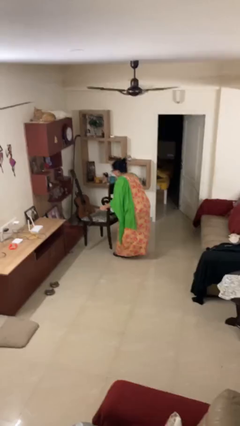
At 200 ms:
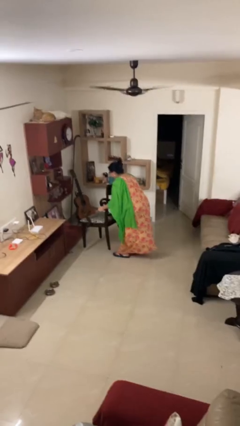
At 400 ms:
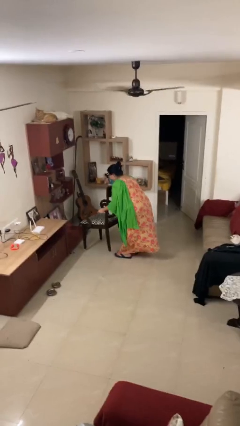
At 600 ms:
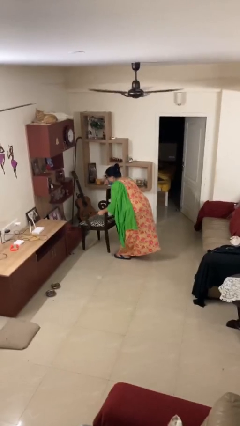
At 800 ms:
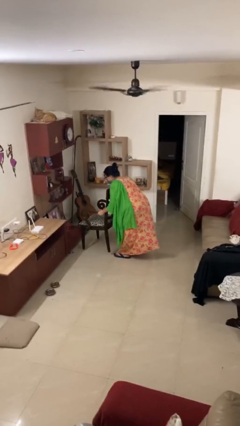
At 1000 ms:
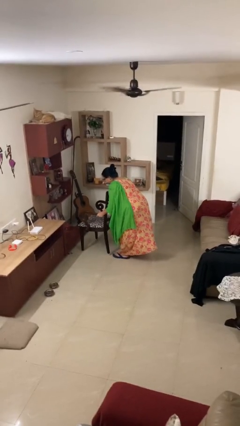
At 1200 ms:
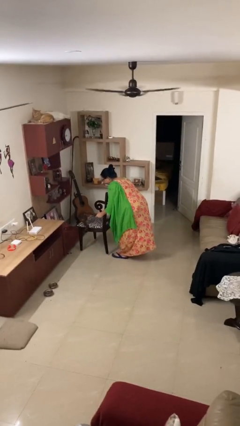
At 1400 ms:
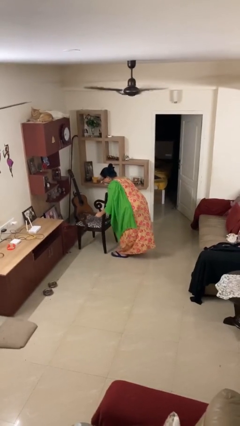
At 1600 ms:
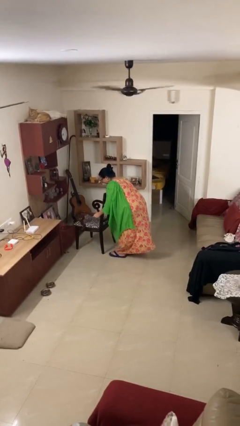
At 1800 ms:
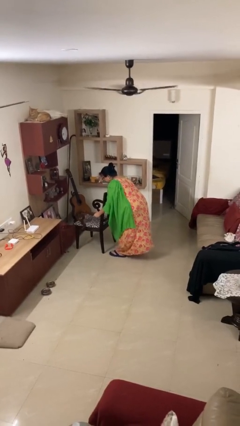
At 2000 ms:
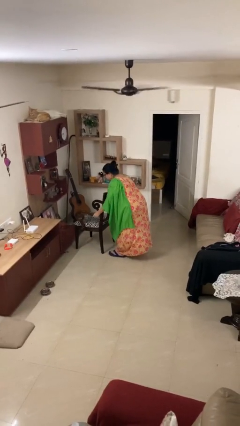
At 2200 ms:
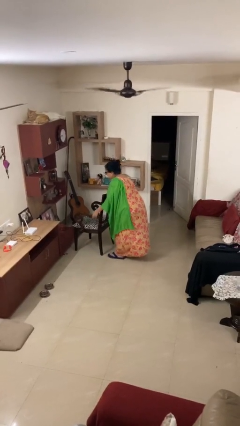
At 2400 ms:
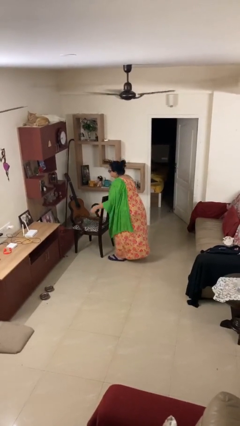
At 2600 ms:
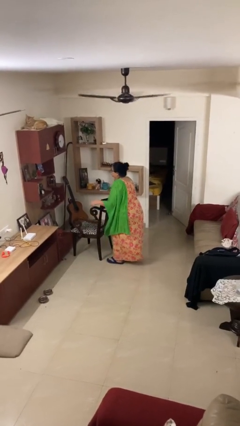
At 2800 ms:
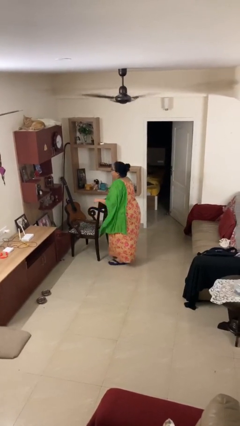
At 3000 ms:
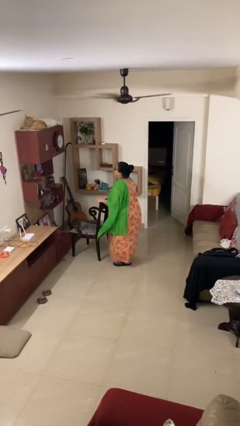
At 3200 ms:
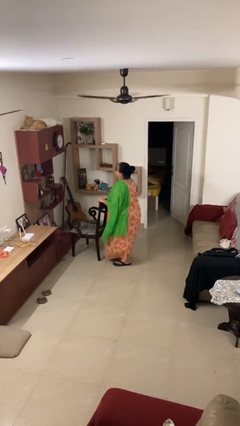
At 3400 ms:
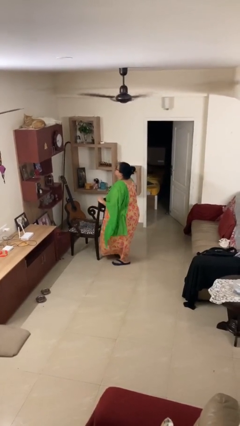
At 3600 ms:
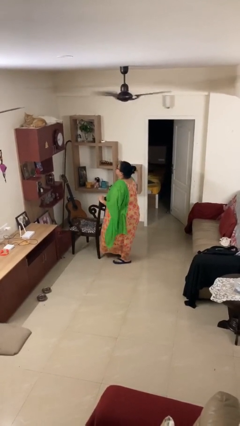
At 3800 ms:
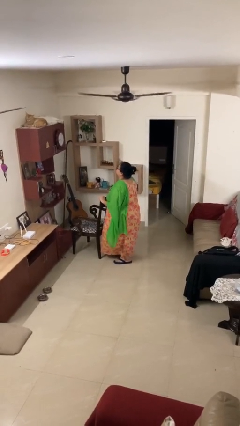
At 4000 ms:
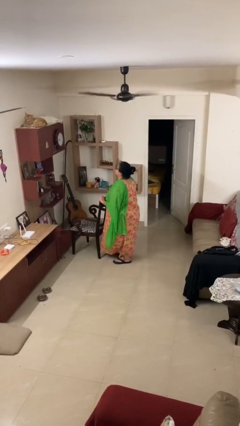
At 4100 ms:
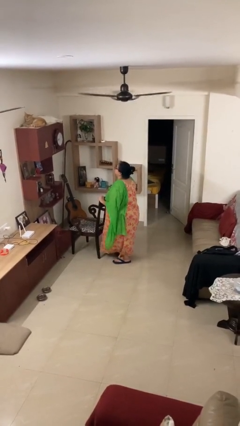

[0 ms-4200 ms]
person puts down object on floor

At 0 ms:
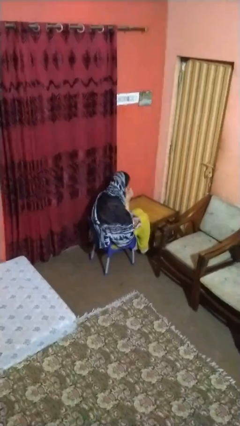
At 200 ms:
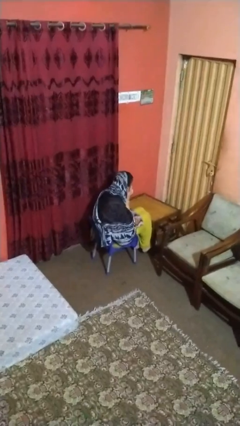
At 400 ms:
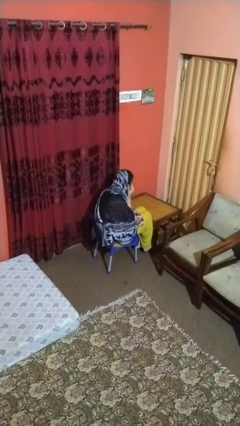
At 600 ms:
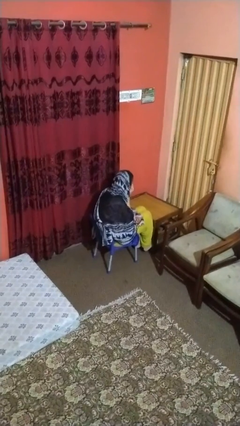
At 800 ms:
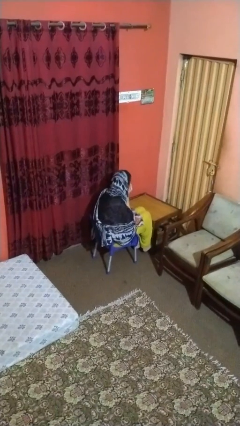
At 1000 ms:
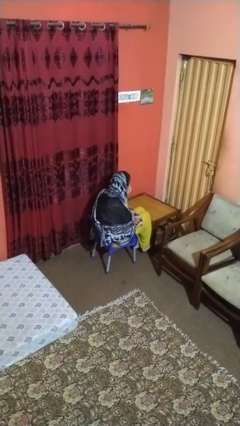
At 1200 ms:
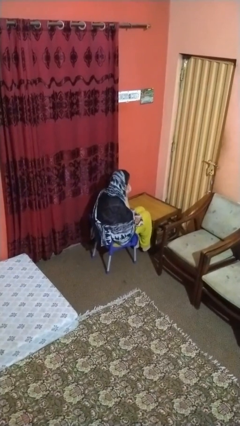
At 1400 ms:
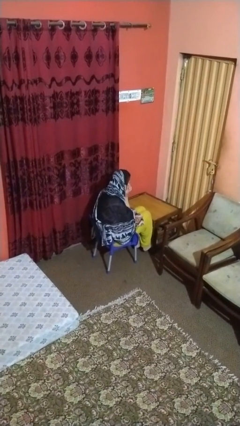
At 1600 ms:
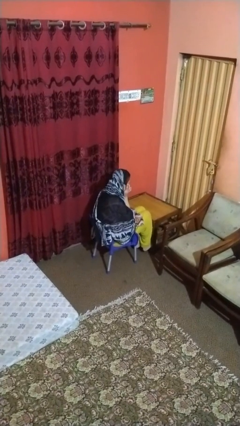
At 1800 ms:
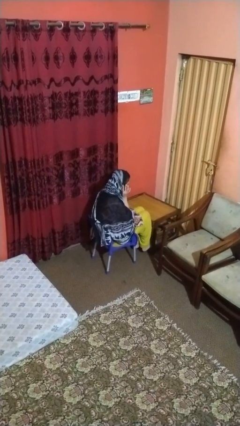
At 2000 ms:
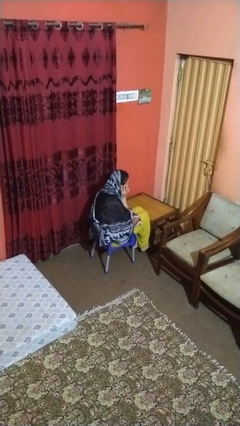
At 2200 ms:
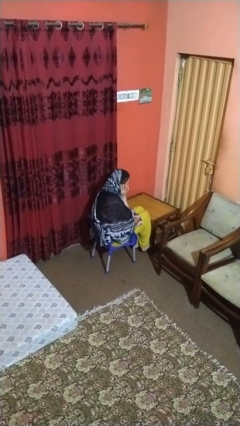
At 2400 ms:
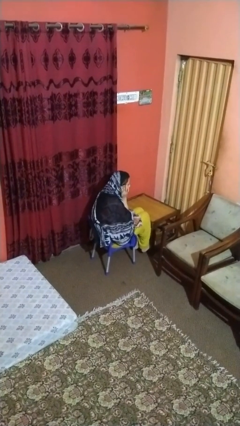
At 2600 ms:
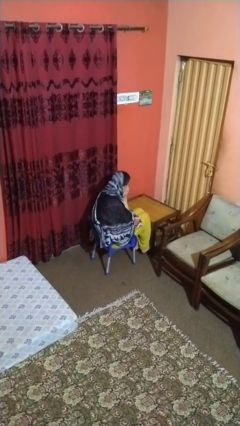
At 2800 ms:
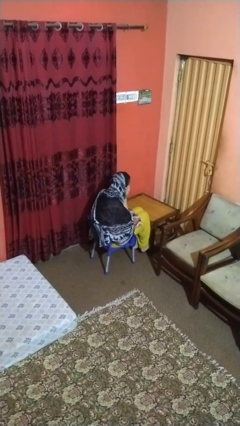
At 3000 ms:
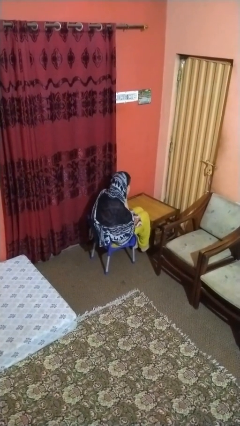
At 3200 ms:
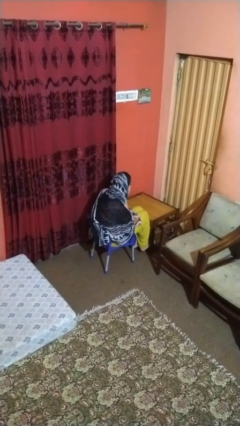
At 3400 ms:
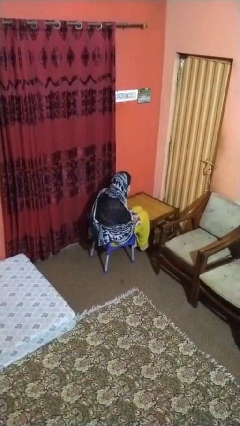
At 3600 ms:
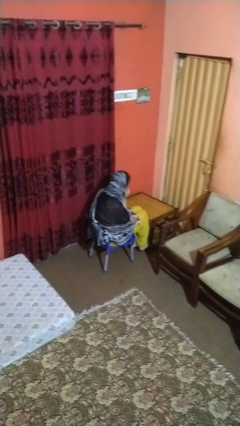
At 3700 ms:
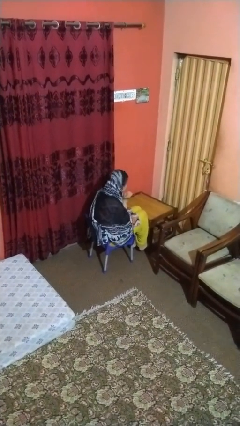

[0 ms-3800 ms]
person puts fingers in ear

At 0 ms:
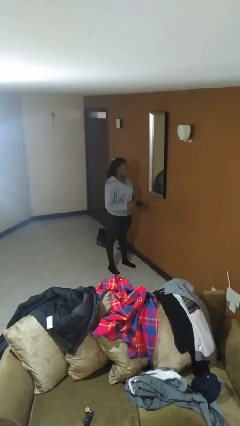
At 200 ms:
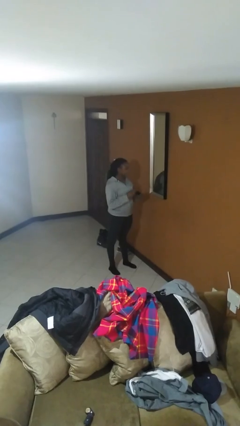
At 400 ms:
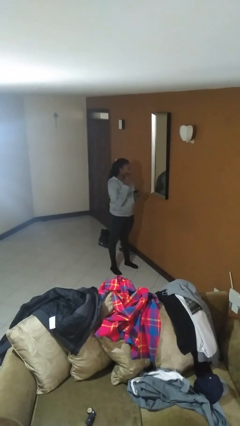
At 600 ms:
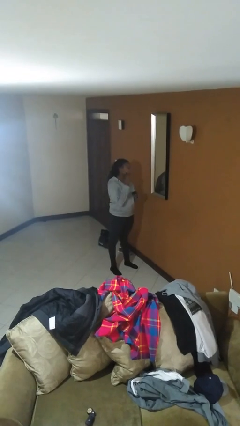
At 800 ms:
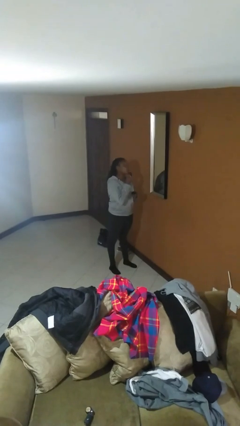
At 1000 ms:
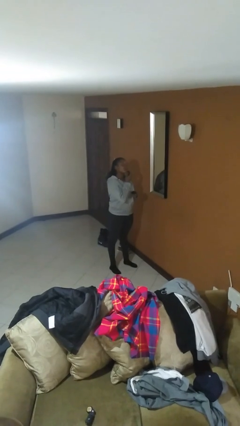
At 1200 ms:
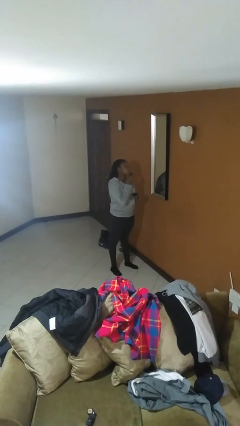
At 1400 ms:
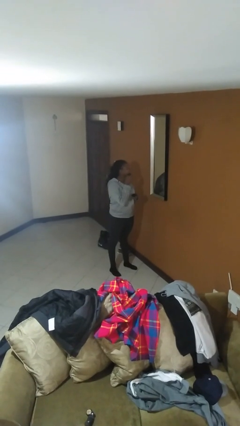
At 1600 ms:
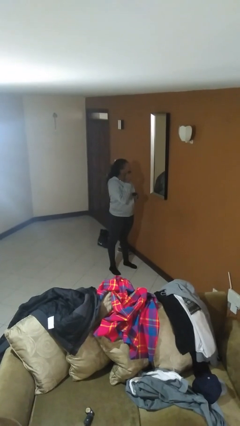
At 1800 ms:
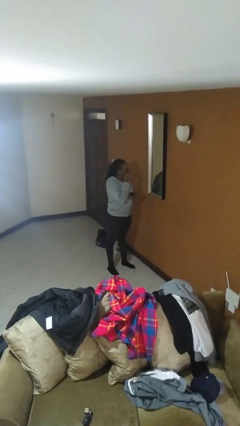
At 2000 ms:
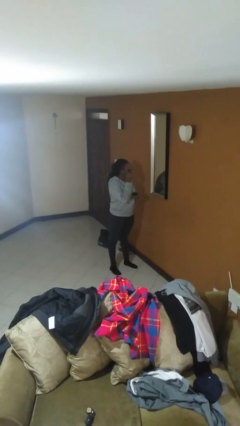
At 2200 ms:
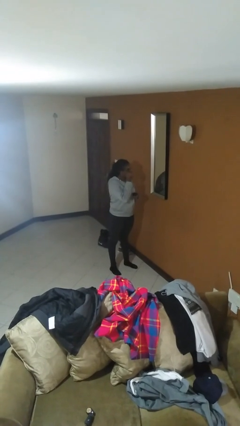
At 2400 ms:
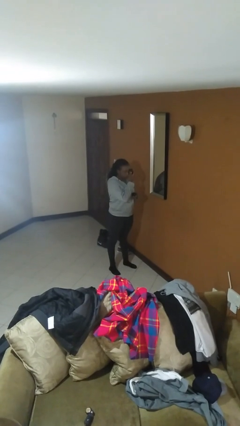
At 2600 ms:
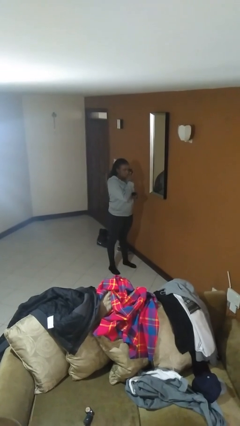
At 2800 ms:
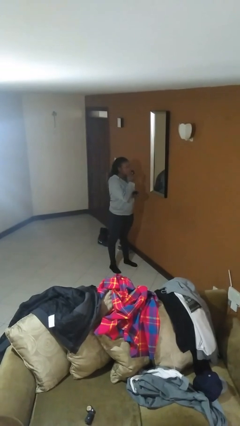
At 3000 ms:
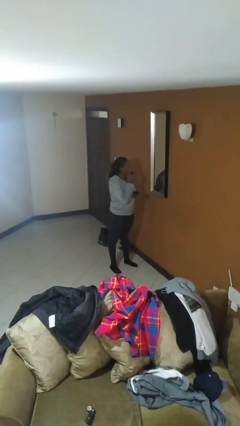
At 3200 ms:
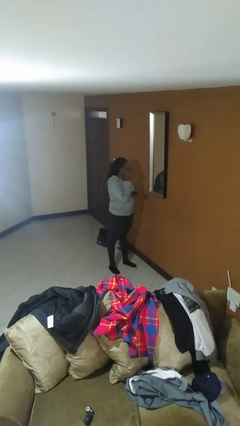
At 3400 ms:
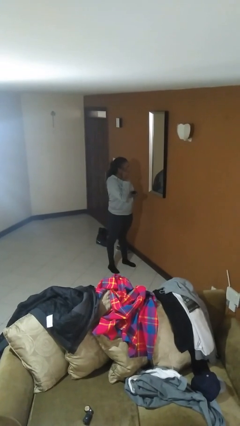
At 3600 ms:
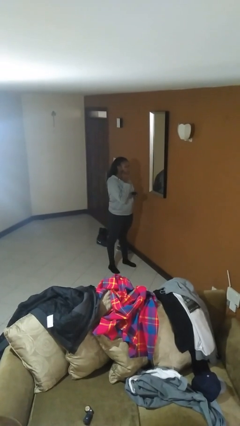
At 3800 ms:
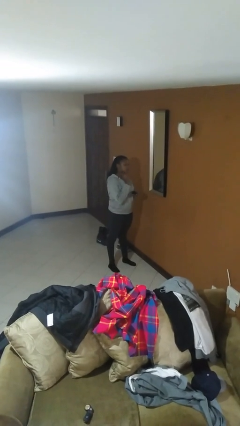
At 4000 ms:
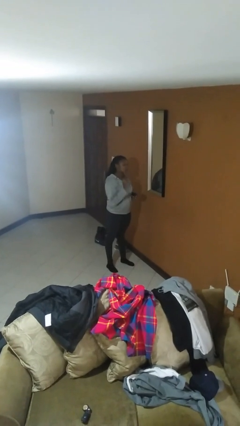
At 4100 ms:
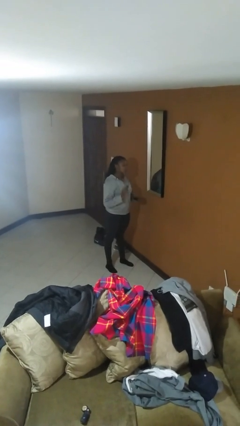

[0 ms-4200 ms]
person applies foundation makeup

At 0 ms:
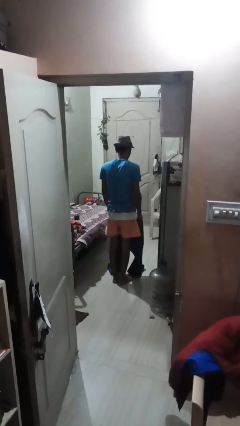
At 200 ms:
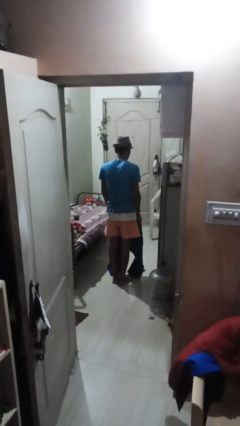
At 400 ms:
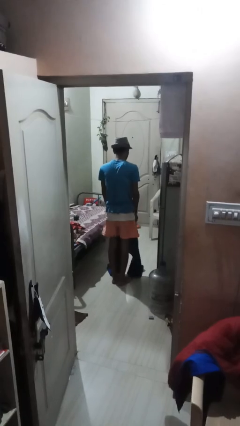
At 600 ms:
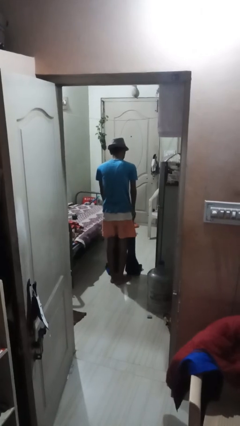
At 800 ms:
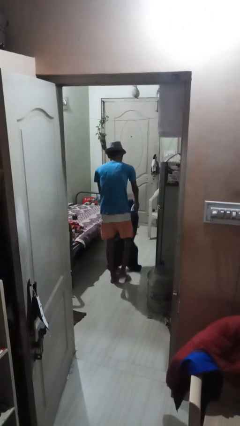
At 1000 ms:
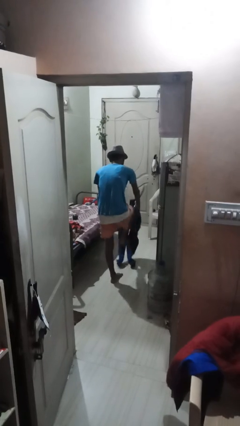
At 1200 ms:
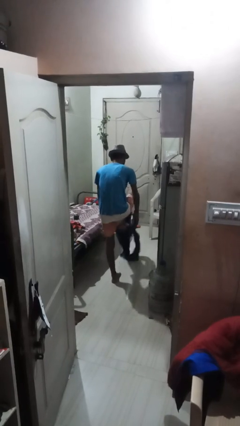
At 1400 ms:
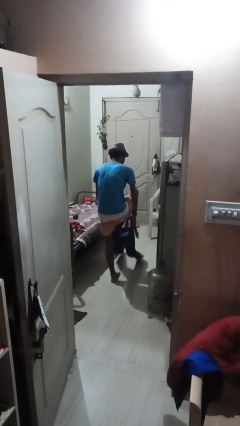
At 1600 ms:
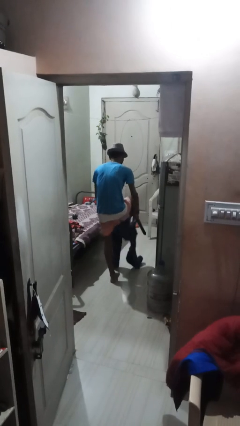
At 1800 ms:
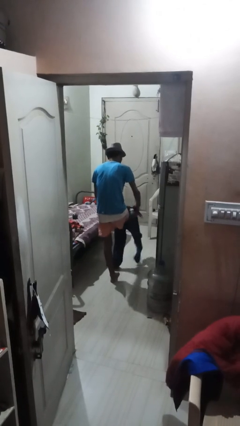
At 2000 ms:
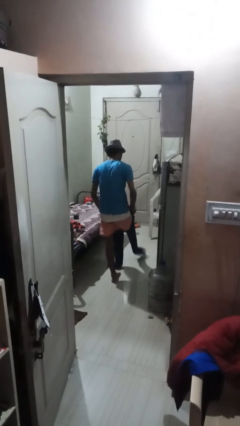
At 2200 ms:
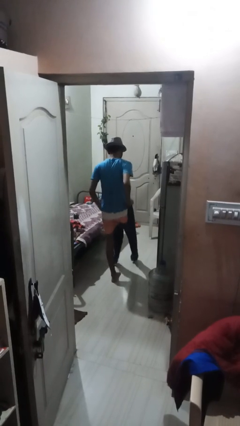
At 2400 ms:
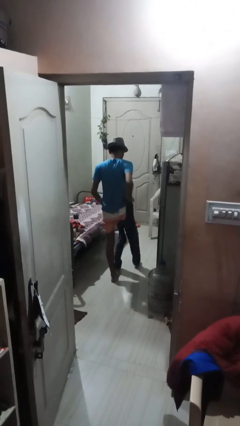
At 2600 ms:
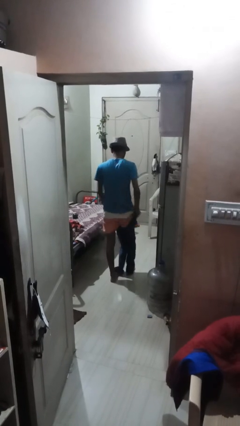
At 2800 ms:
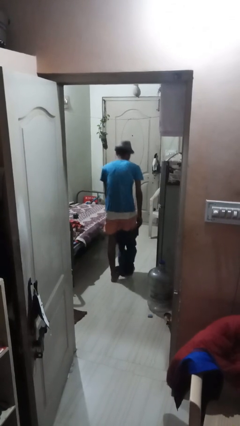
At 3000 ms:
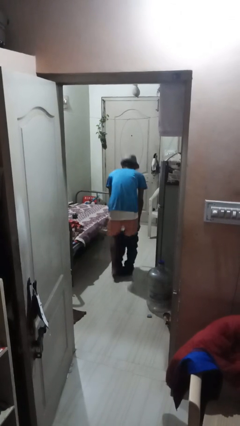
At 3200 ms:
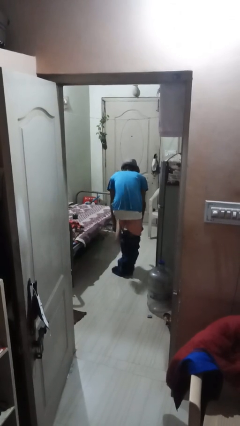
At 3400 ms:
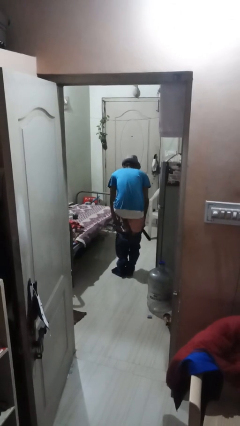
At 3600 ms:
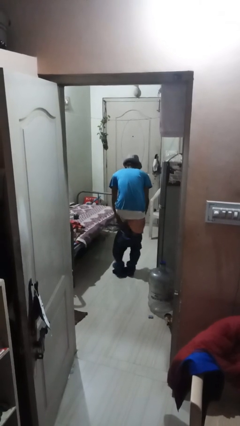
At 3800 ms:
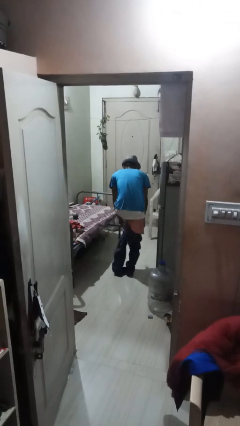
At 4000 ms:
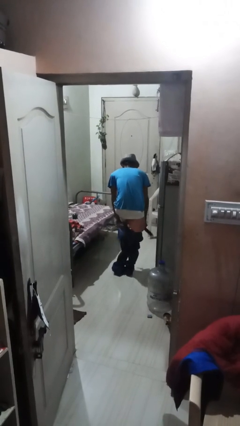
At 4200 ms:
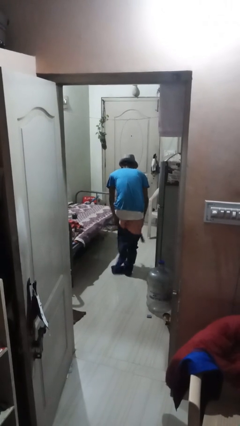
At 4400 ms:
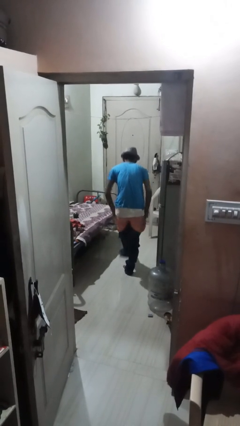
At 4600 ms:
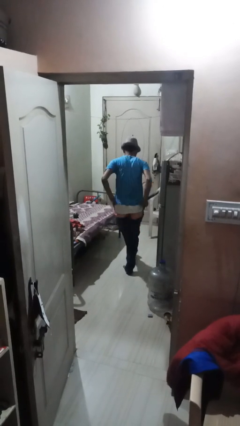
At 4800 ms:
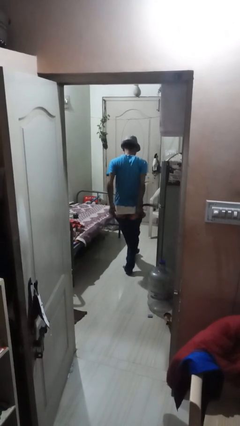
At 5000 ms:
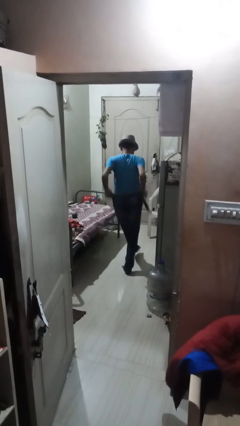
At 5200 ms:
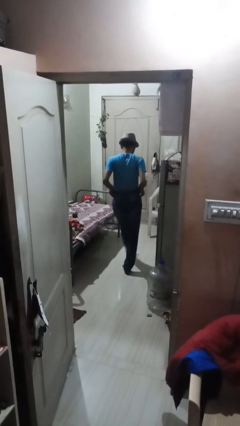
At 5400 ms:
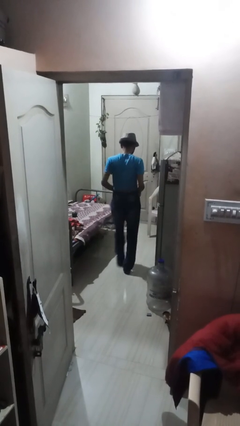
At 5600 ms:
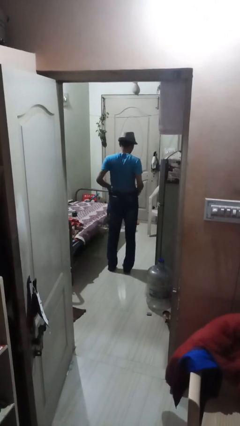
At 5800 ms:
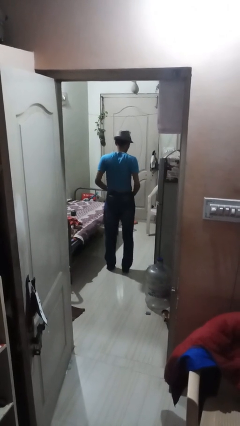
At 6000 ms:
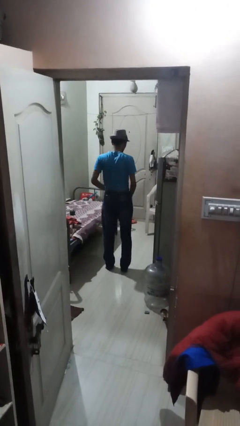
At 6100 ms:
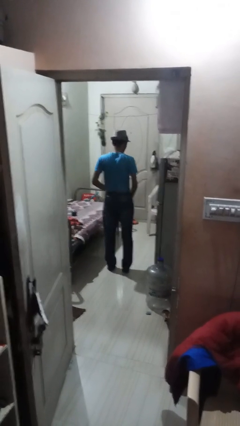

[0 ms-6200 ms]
person puts on pants
